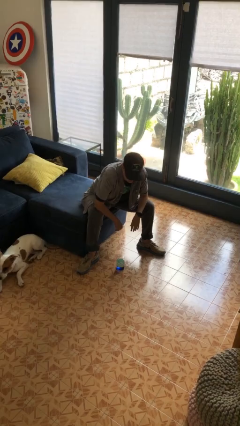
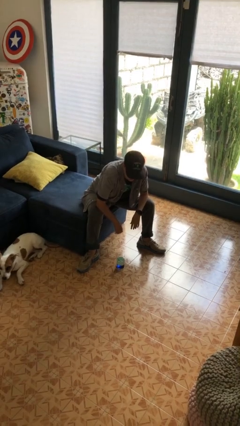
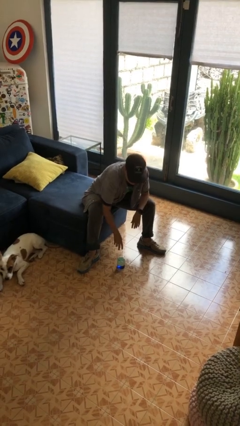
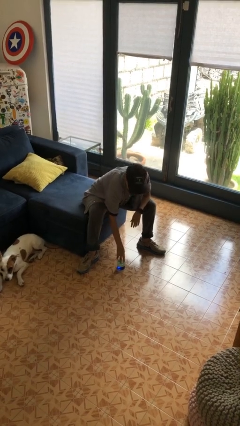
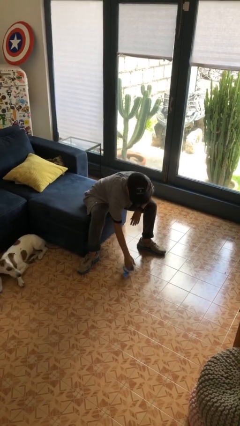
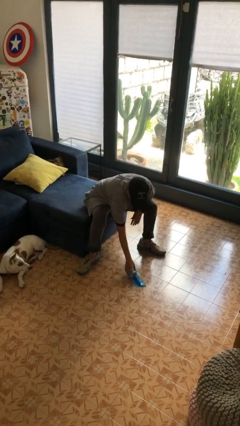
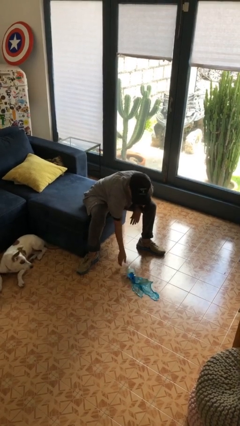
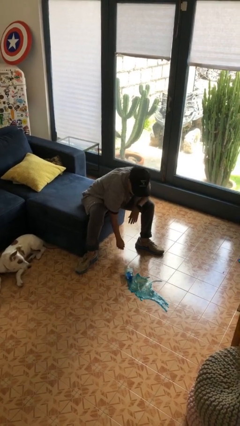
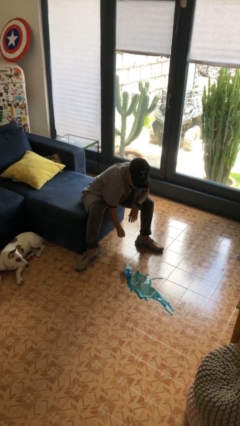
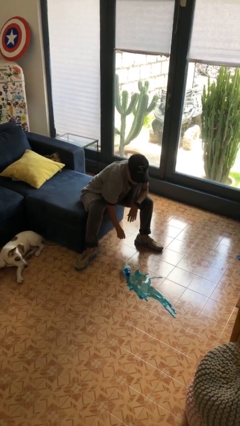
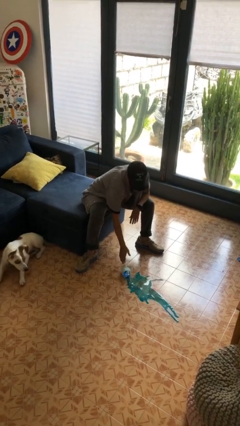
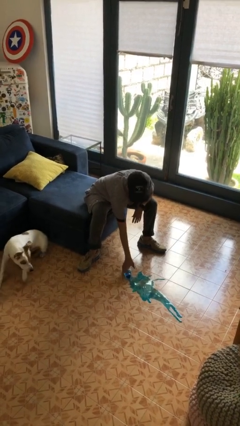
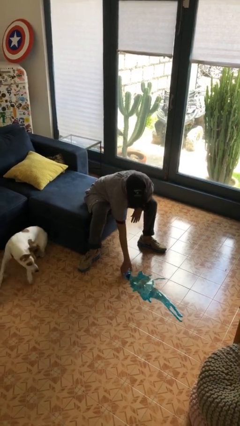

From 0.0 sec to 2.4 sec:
person spills on floor

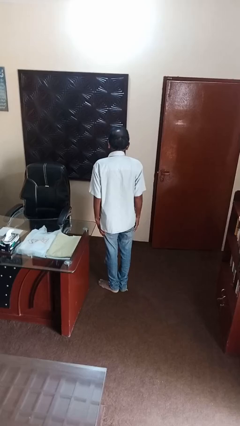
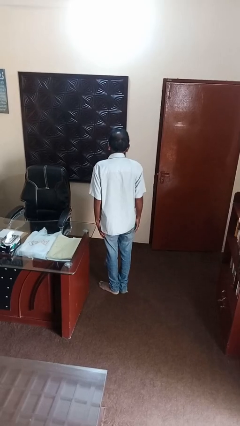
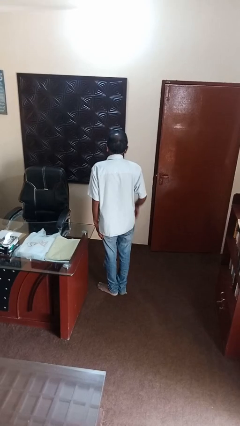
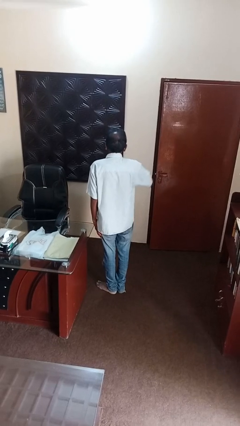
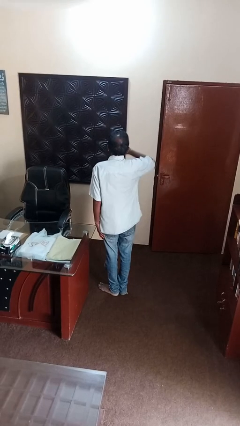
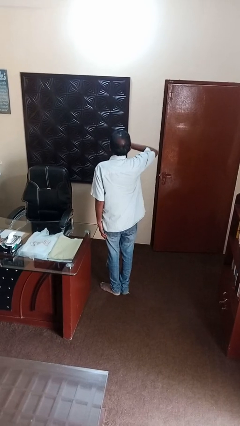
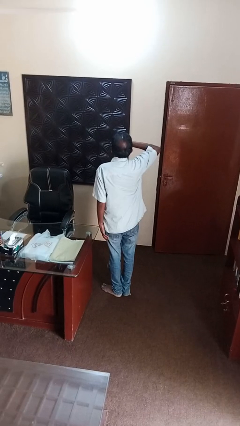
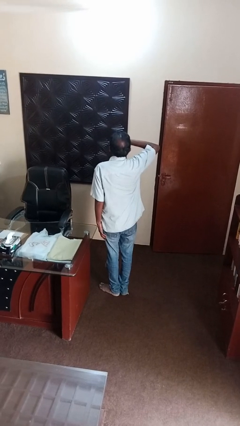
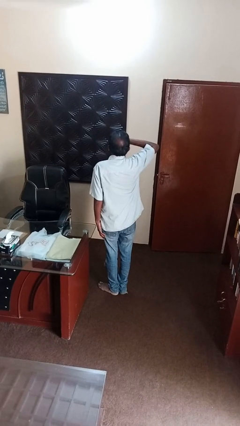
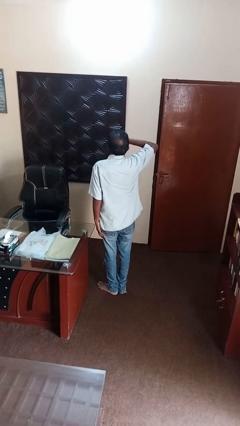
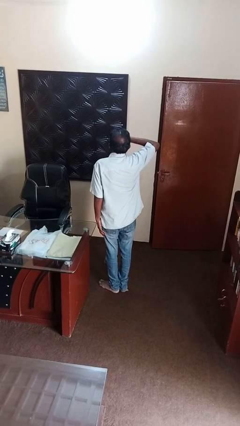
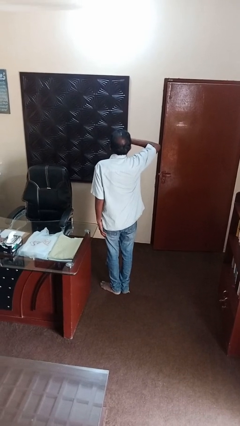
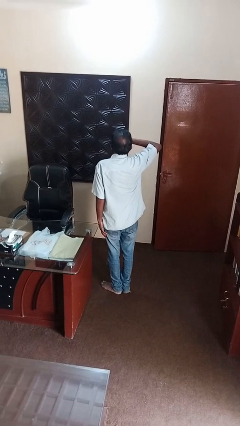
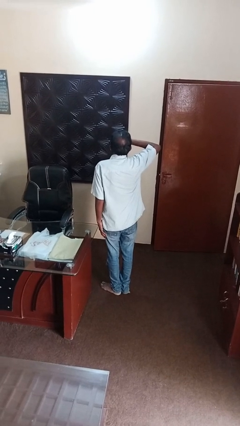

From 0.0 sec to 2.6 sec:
person yawns

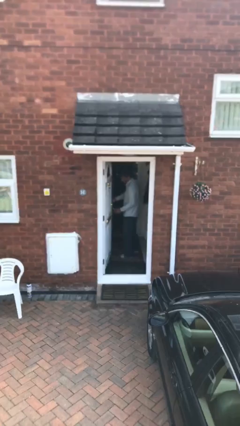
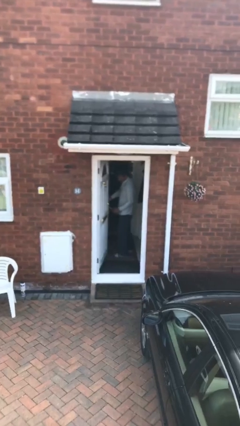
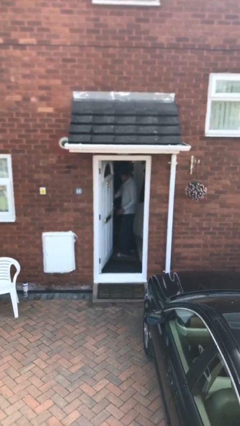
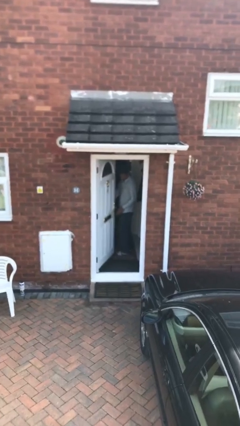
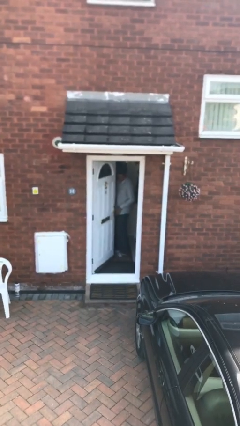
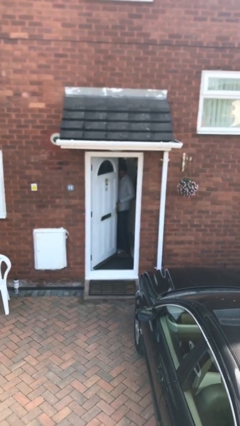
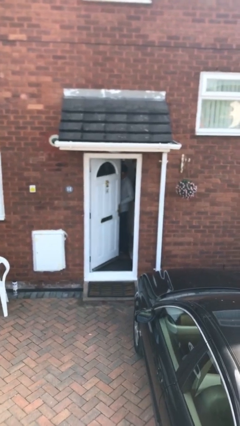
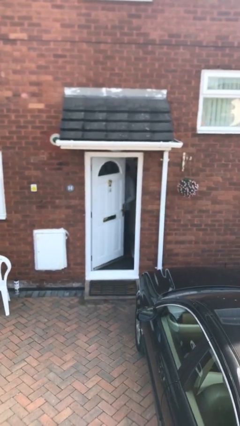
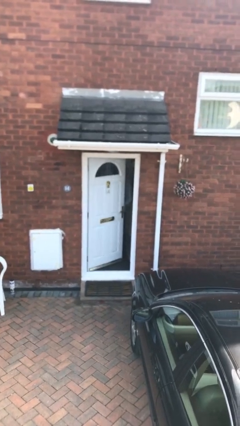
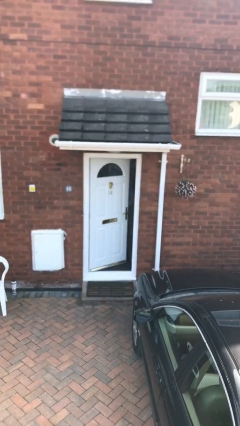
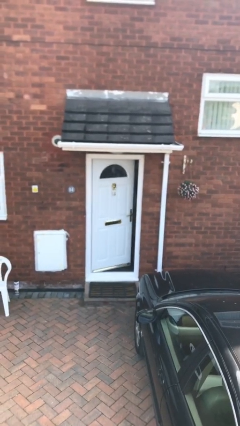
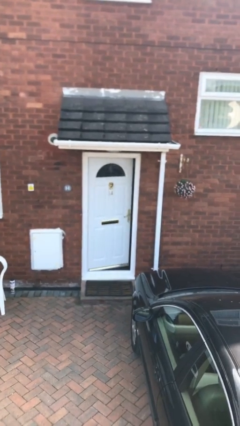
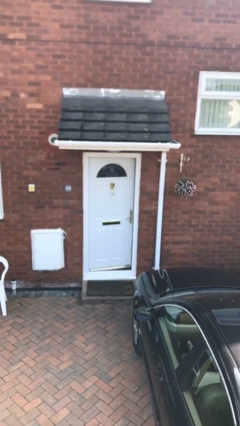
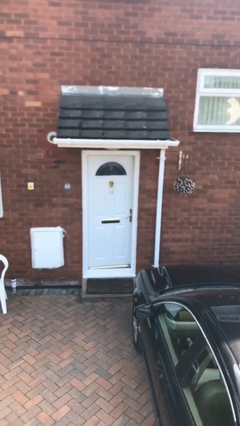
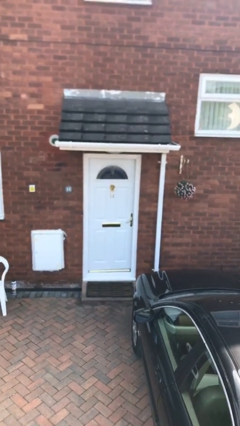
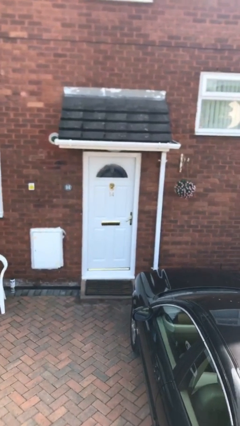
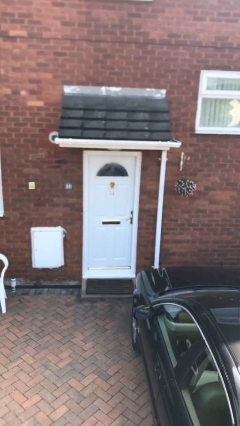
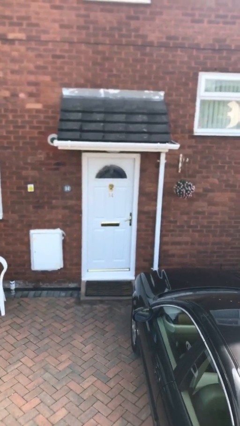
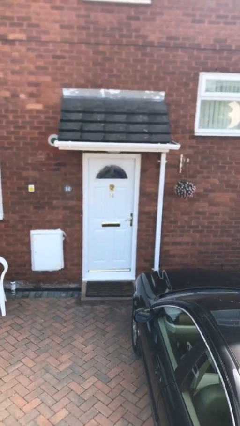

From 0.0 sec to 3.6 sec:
person closes facility door

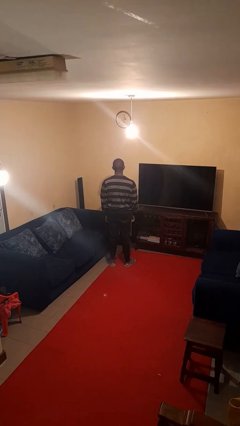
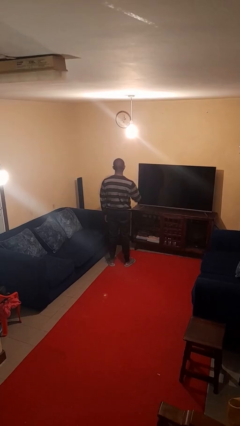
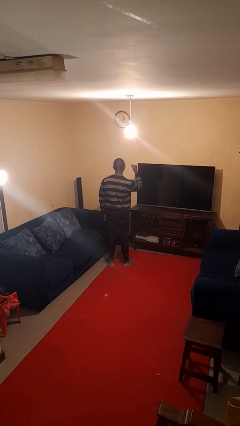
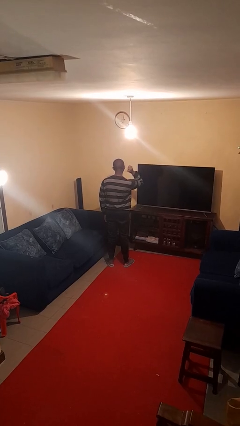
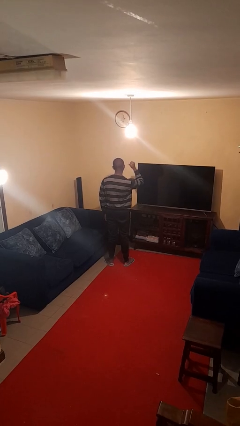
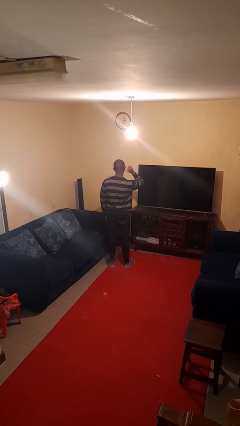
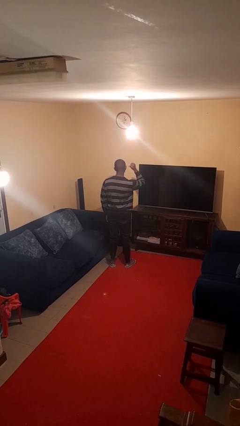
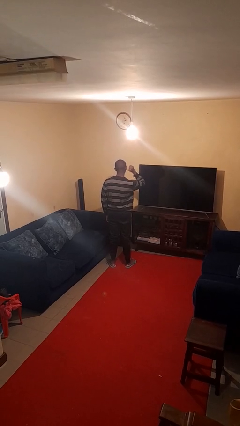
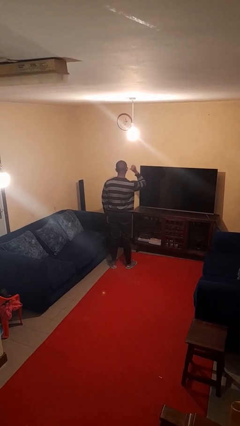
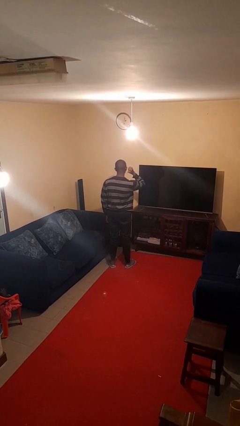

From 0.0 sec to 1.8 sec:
person gestures behind me

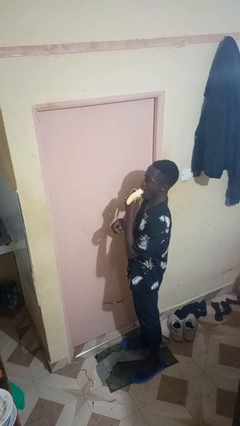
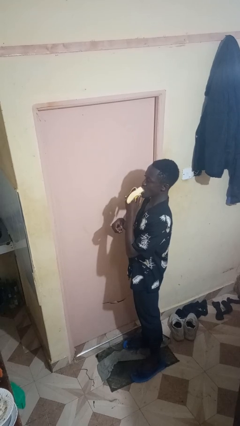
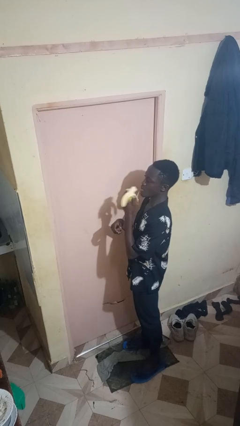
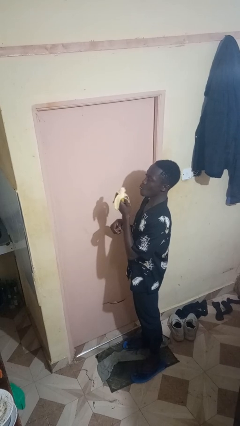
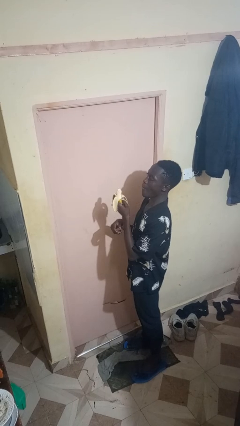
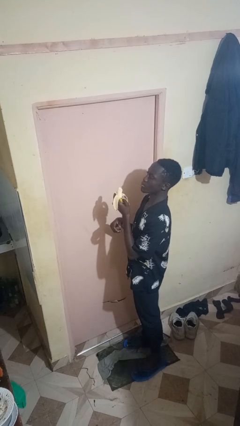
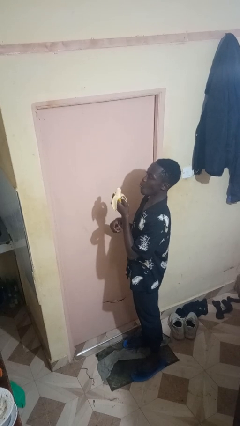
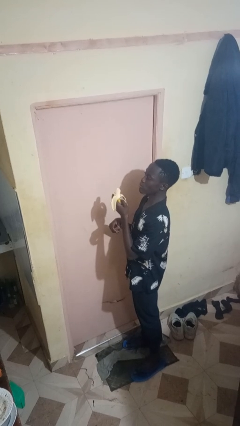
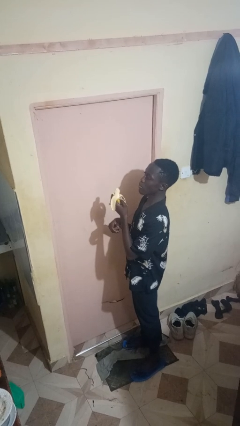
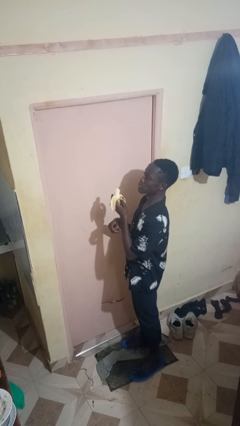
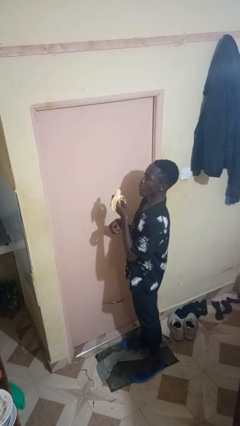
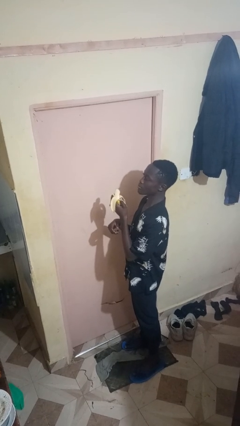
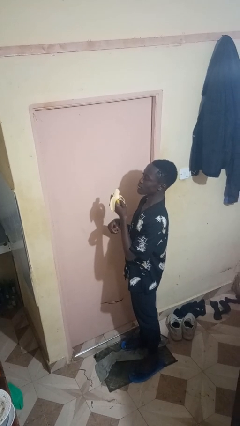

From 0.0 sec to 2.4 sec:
person eats banana

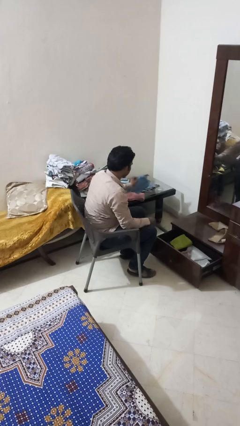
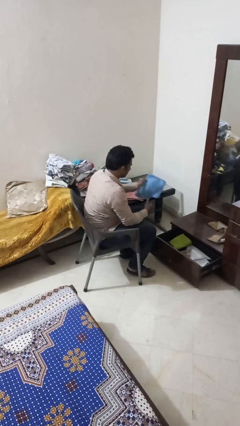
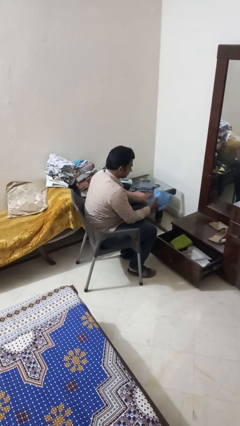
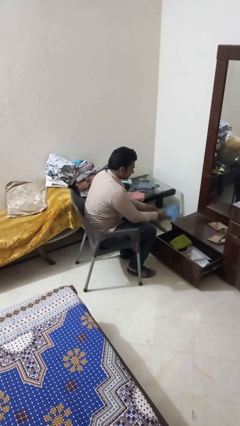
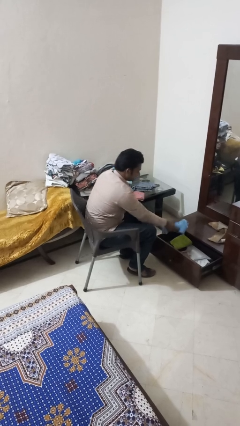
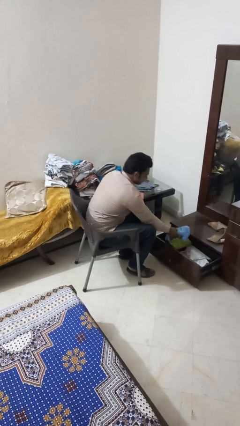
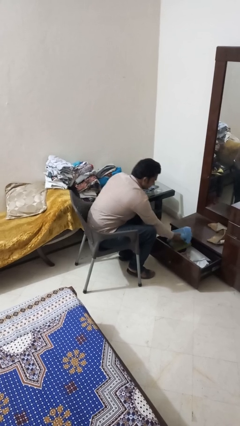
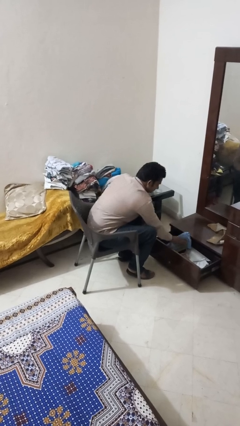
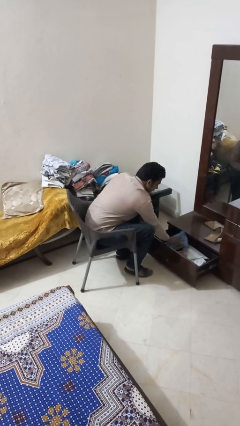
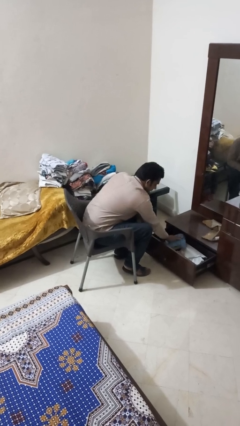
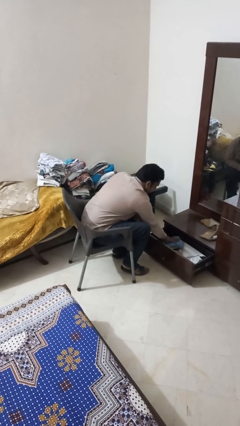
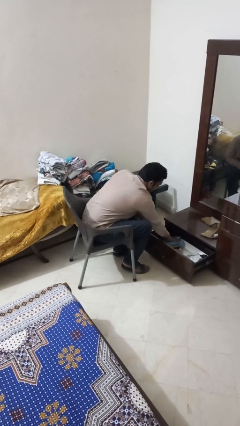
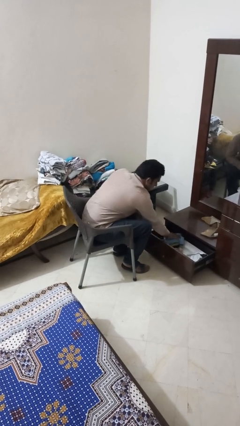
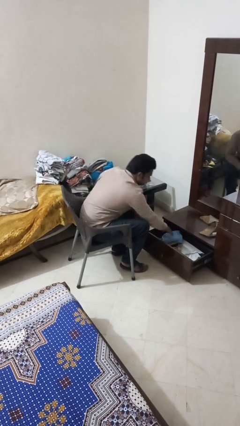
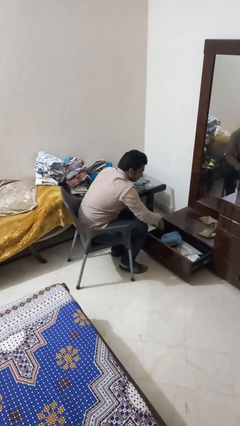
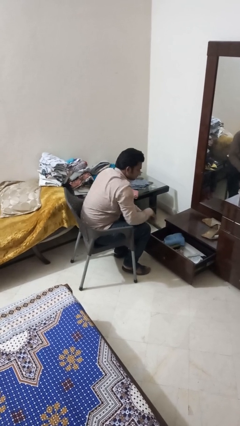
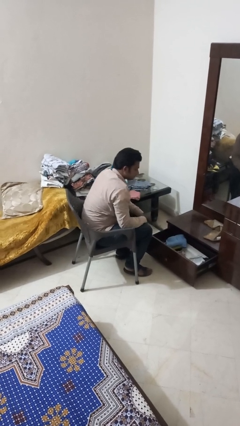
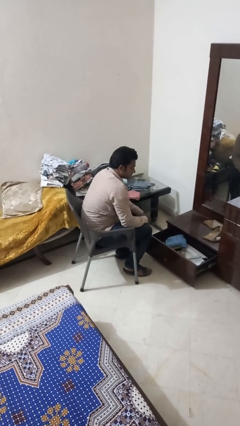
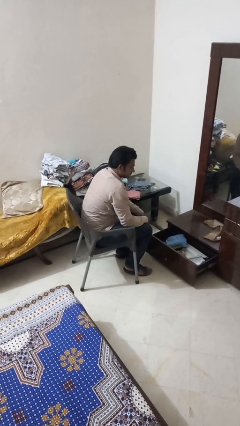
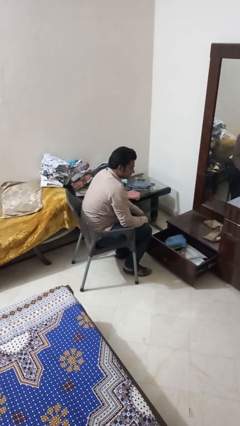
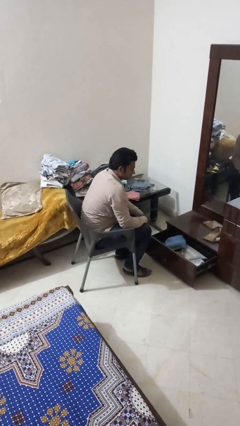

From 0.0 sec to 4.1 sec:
person puts clothes into dresser

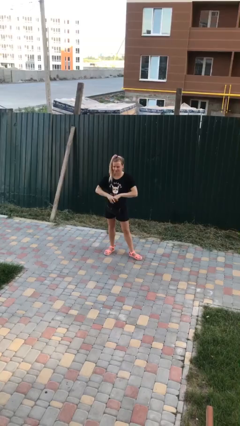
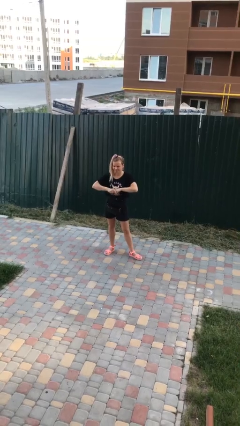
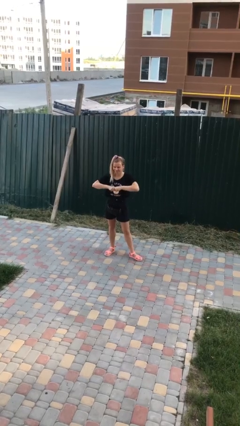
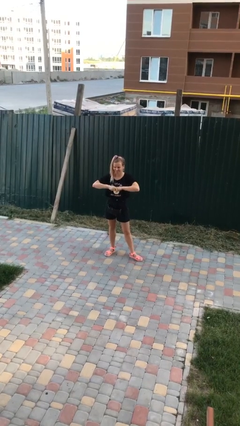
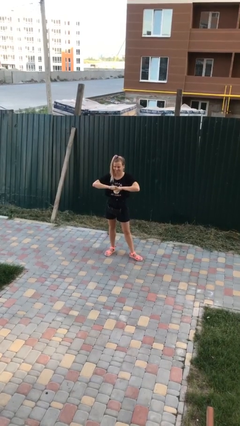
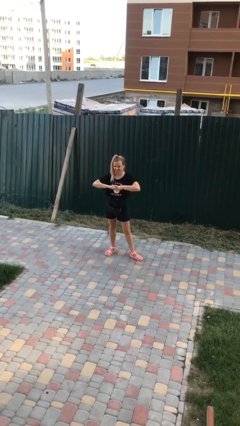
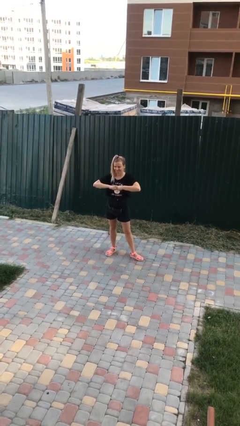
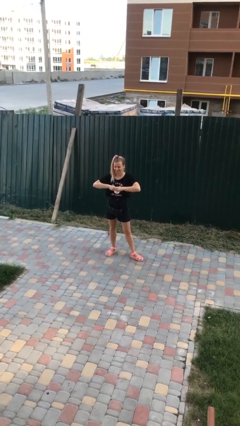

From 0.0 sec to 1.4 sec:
person cracks knuckles
